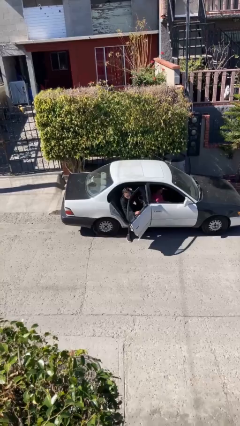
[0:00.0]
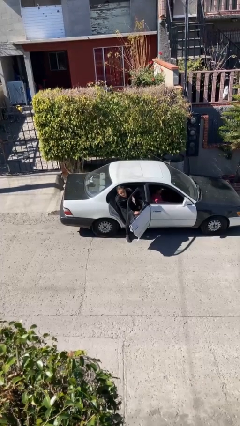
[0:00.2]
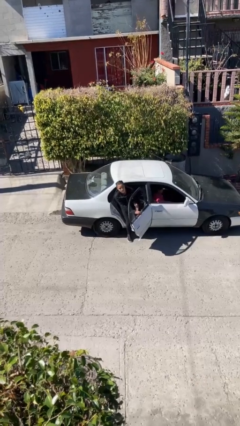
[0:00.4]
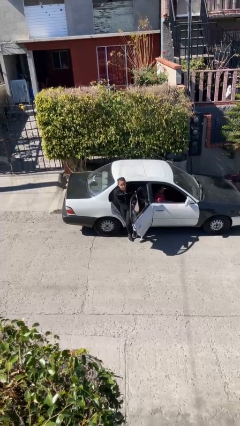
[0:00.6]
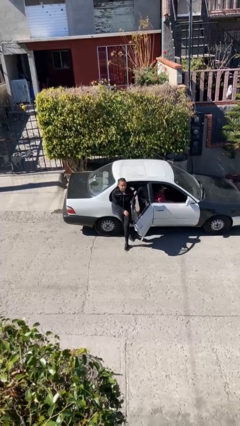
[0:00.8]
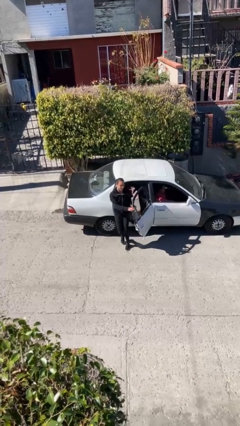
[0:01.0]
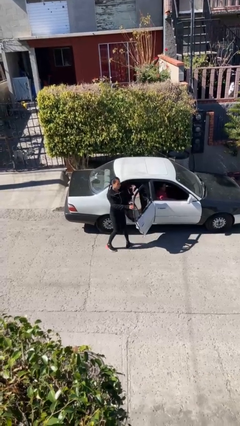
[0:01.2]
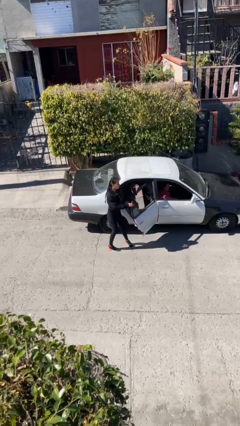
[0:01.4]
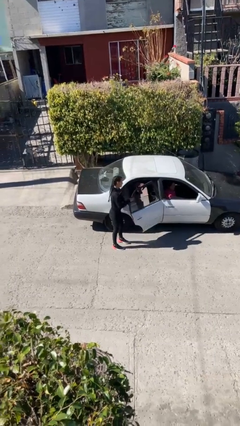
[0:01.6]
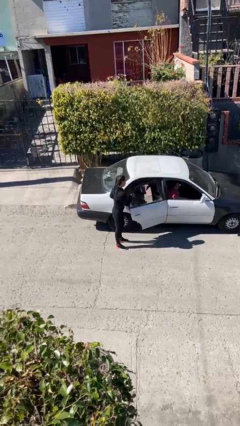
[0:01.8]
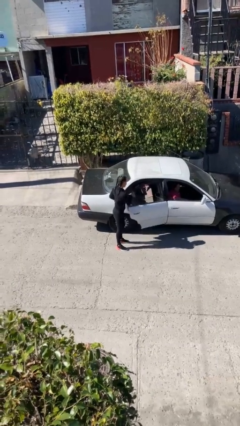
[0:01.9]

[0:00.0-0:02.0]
car drops off person

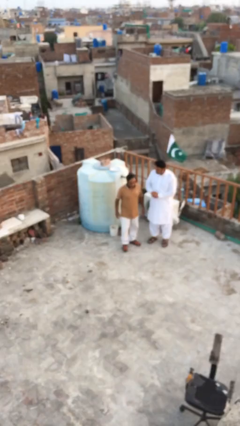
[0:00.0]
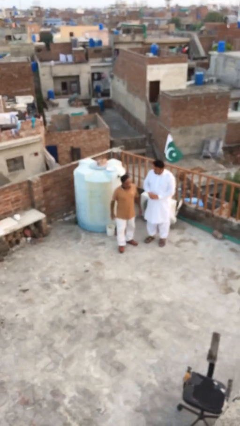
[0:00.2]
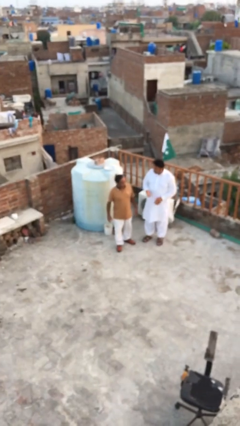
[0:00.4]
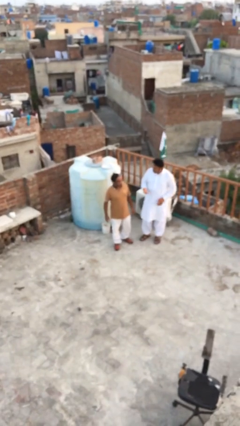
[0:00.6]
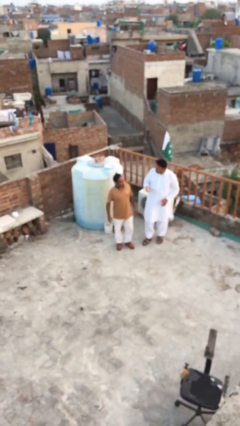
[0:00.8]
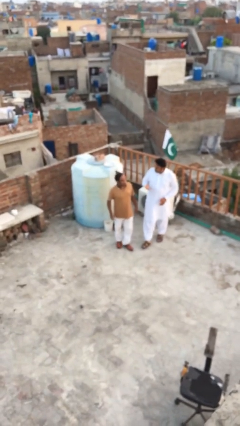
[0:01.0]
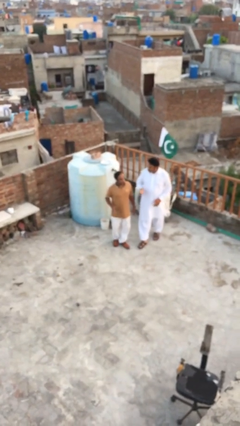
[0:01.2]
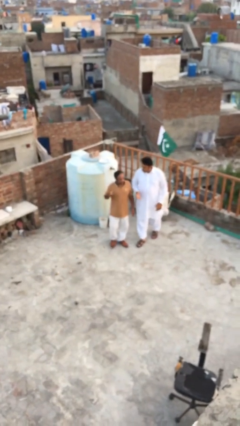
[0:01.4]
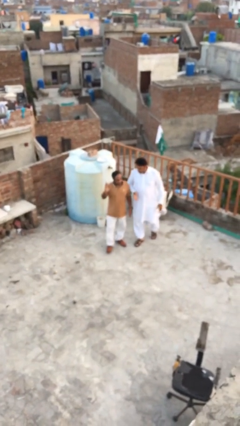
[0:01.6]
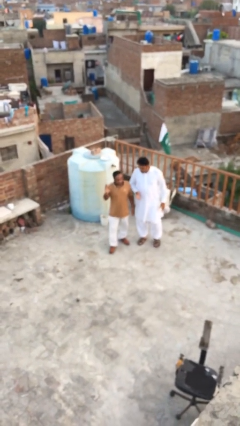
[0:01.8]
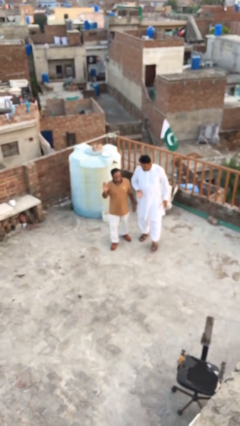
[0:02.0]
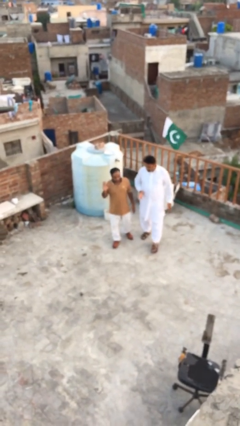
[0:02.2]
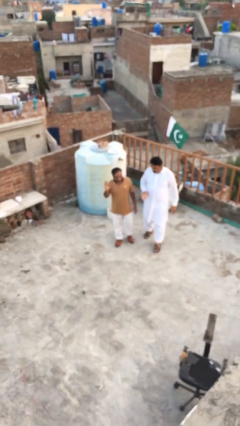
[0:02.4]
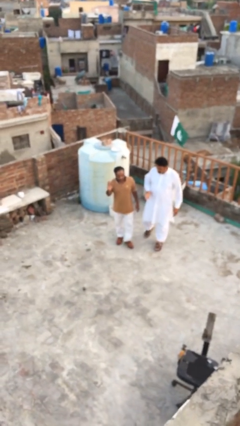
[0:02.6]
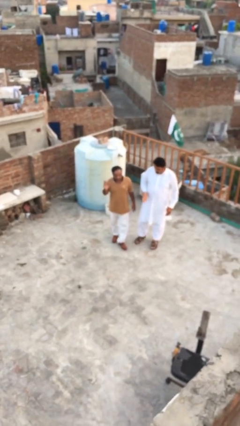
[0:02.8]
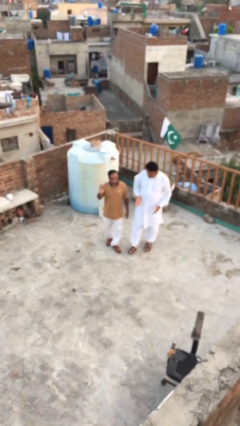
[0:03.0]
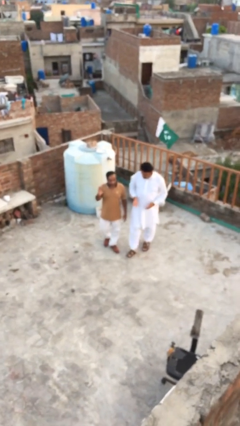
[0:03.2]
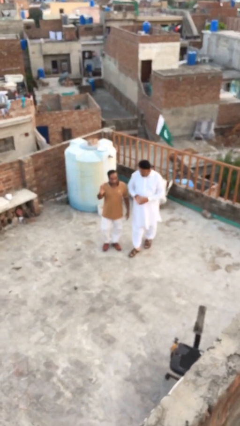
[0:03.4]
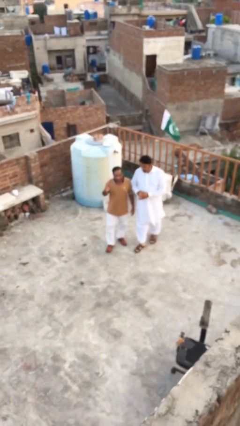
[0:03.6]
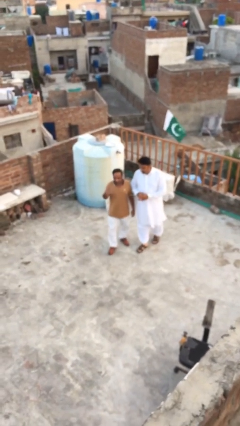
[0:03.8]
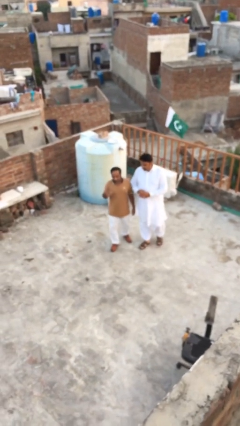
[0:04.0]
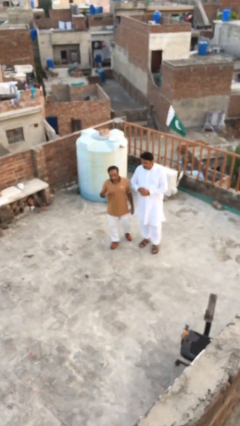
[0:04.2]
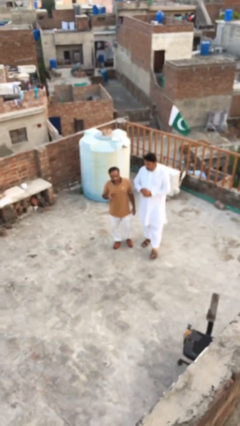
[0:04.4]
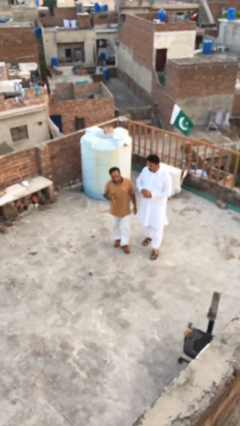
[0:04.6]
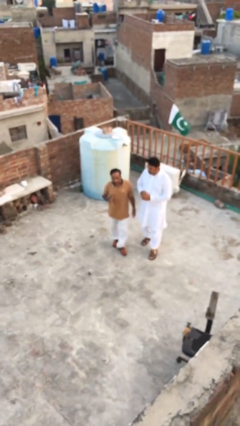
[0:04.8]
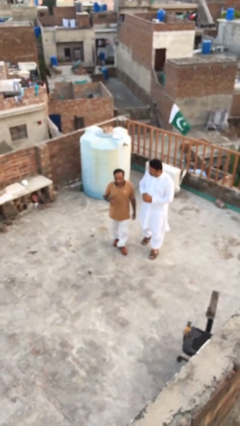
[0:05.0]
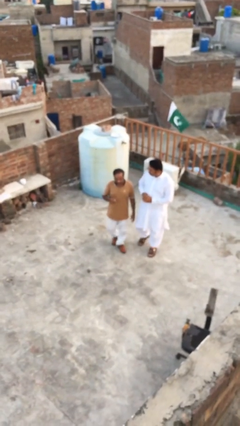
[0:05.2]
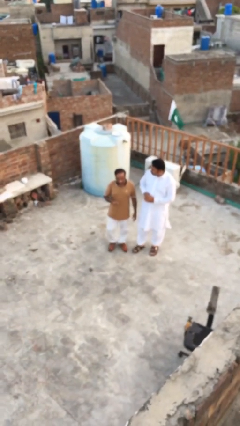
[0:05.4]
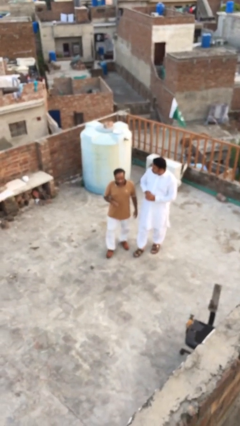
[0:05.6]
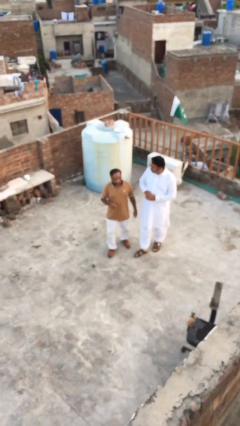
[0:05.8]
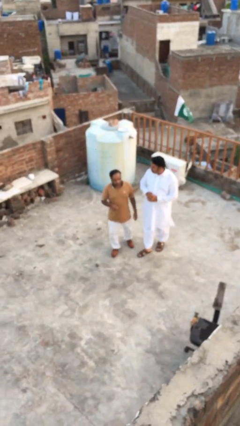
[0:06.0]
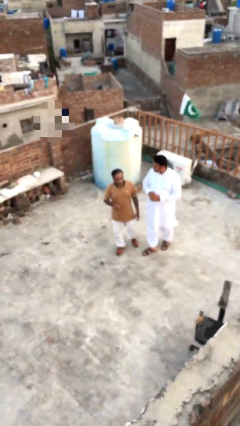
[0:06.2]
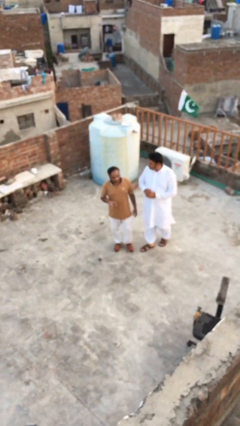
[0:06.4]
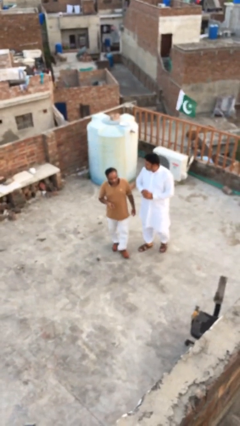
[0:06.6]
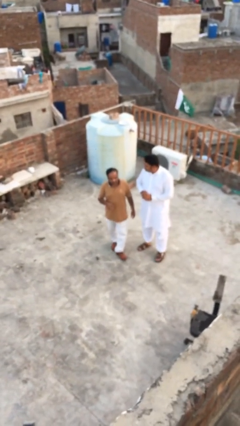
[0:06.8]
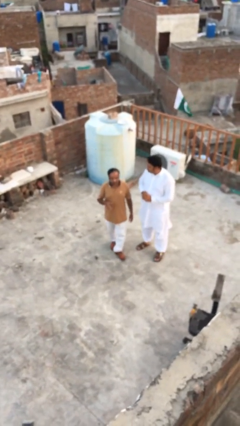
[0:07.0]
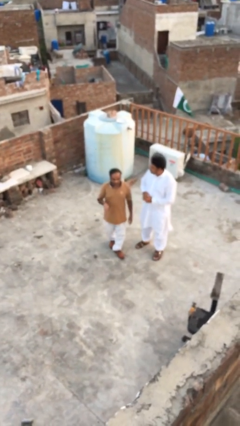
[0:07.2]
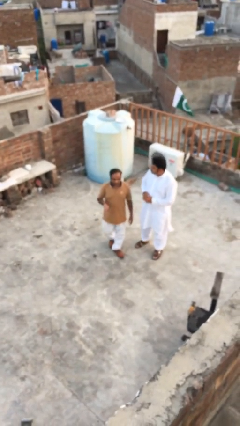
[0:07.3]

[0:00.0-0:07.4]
person talks to person

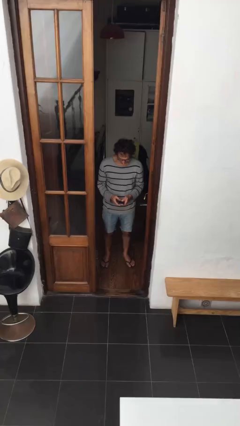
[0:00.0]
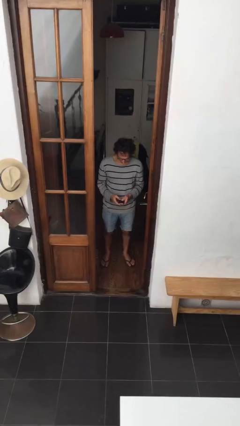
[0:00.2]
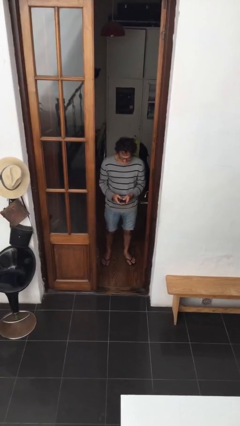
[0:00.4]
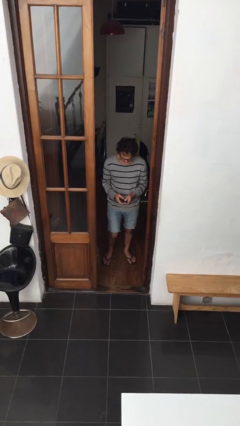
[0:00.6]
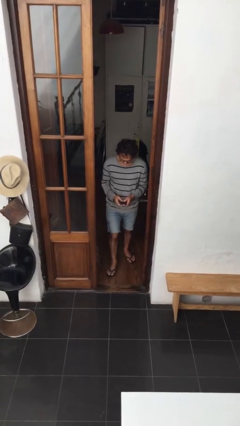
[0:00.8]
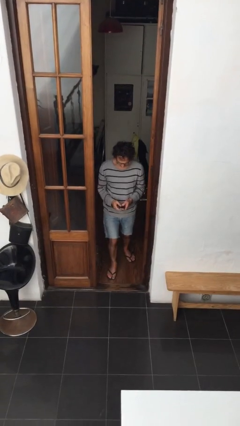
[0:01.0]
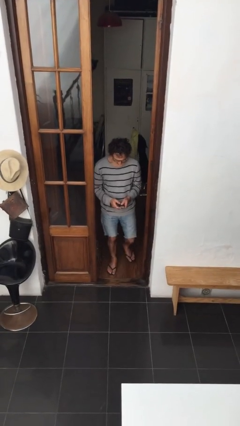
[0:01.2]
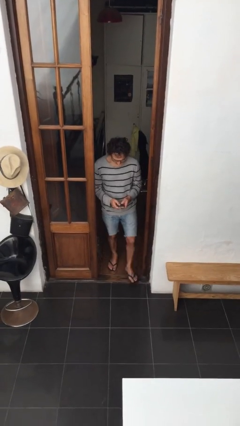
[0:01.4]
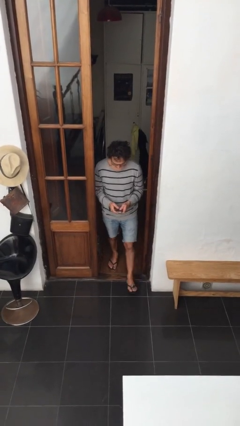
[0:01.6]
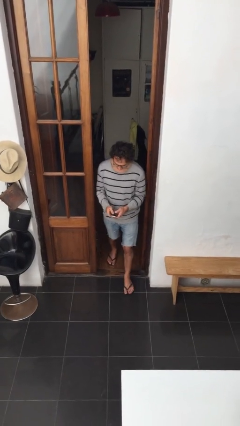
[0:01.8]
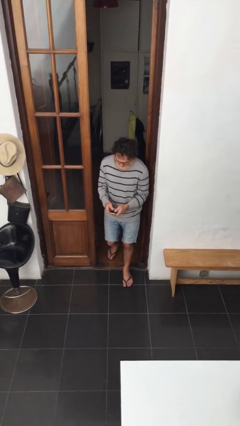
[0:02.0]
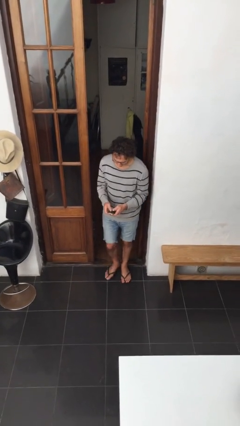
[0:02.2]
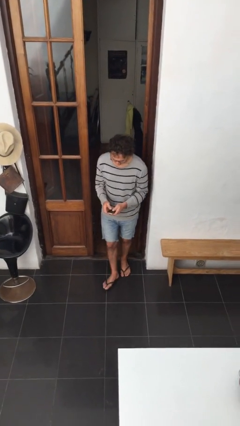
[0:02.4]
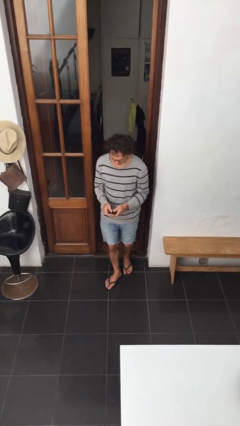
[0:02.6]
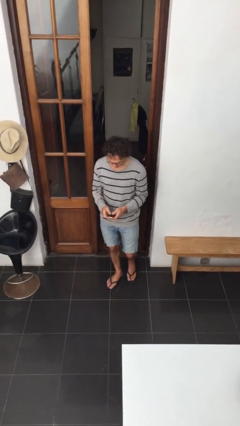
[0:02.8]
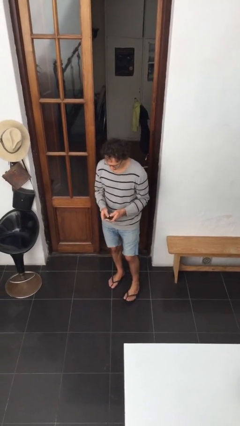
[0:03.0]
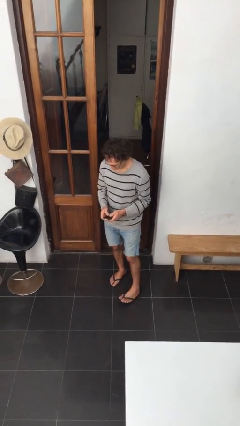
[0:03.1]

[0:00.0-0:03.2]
person enters scene through structure

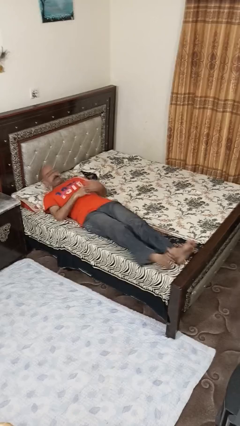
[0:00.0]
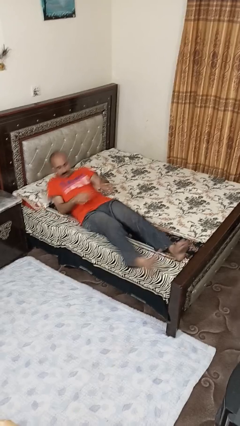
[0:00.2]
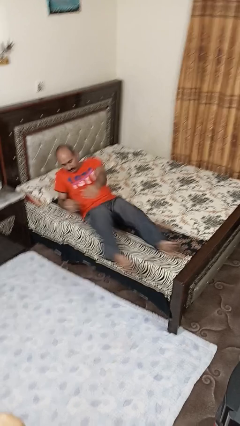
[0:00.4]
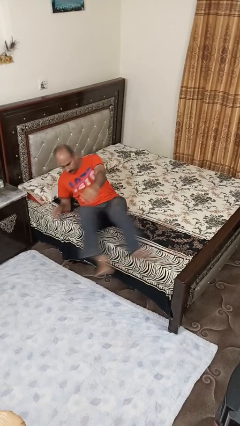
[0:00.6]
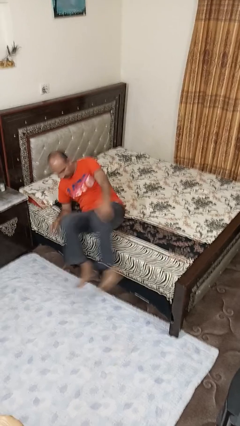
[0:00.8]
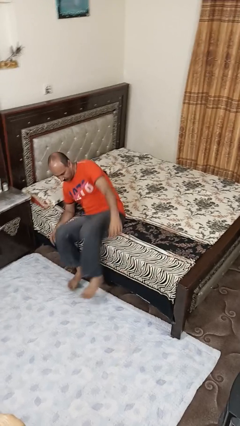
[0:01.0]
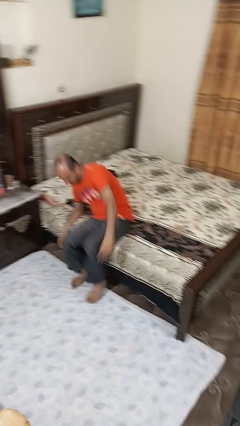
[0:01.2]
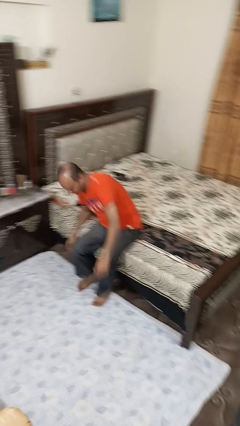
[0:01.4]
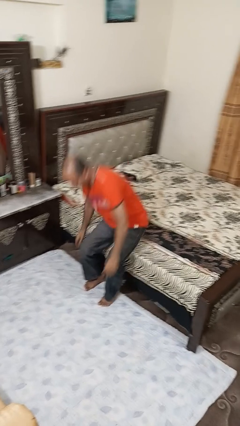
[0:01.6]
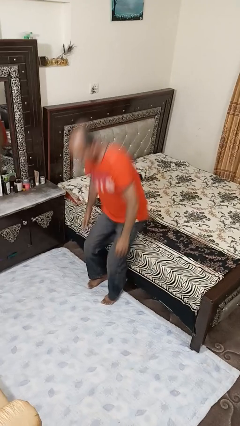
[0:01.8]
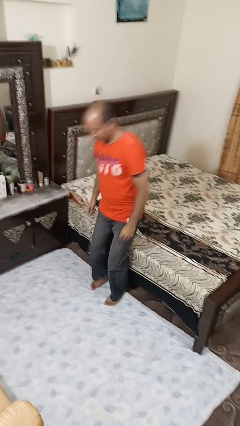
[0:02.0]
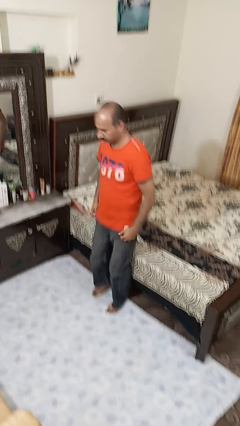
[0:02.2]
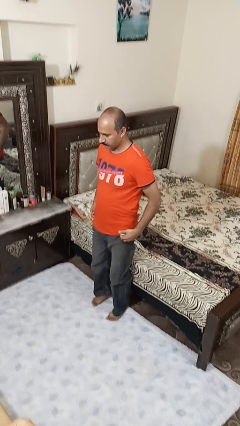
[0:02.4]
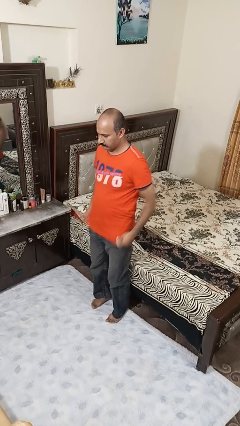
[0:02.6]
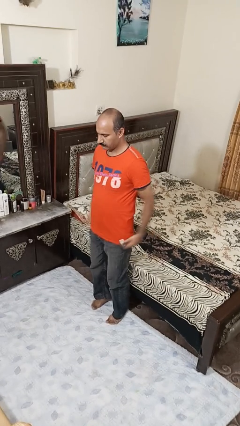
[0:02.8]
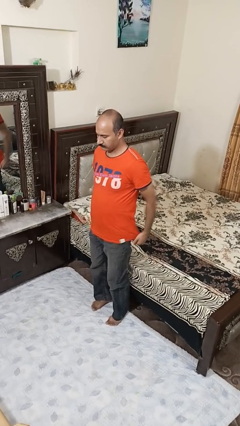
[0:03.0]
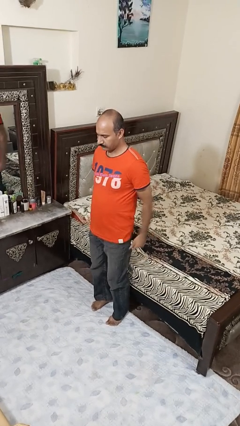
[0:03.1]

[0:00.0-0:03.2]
person stands up

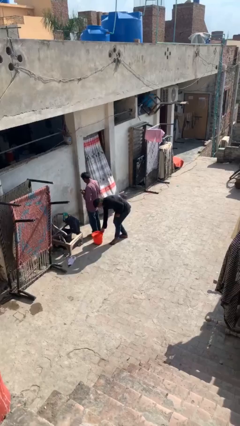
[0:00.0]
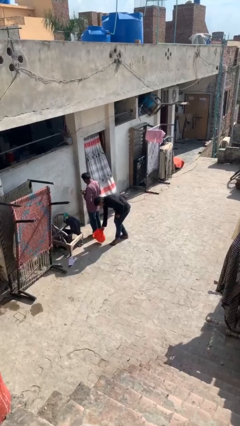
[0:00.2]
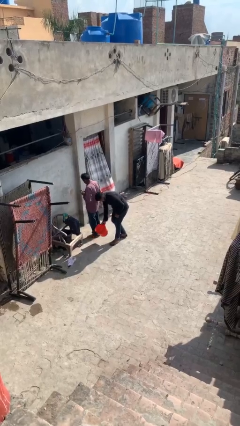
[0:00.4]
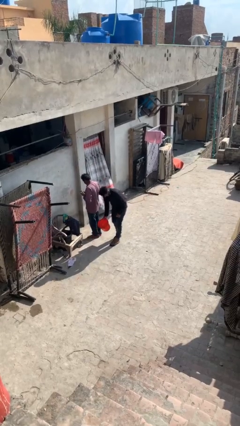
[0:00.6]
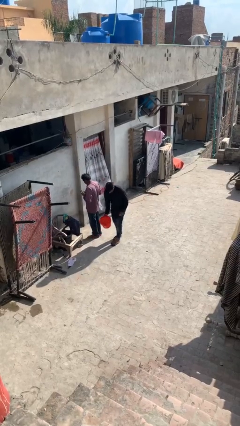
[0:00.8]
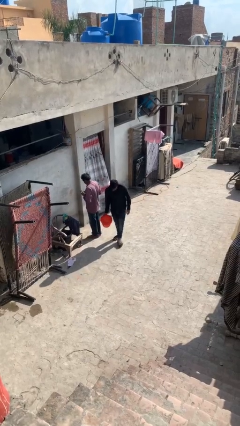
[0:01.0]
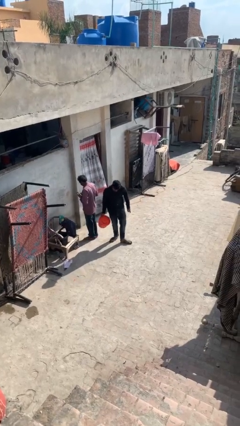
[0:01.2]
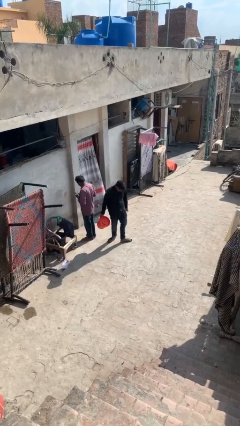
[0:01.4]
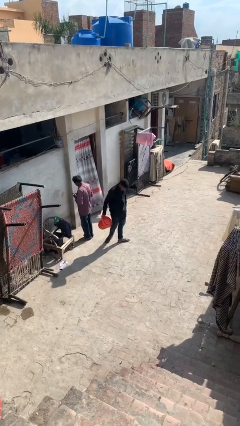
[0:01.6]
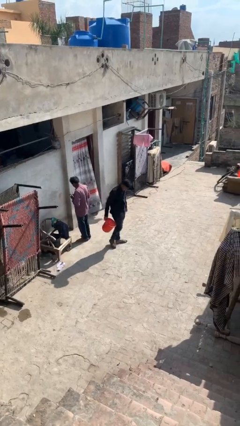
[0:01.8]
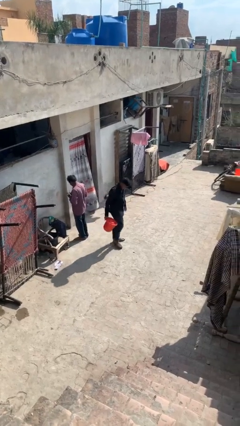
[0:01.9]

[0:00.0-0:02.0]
person steals object from person
